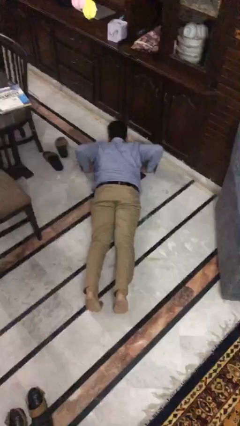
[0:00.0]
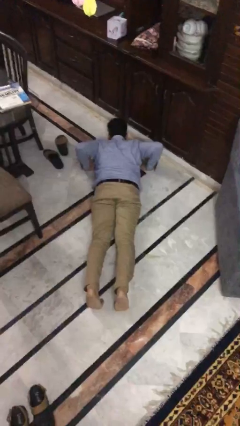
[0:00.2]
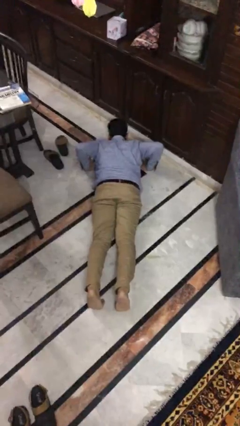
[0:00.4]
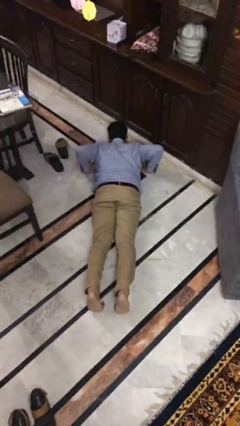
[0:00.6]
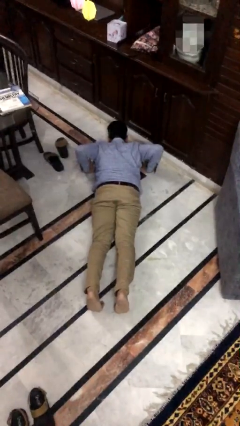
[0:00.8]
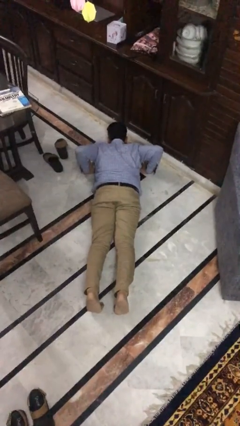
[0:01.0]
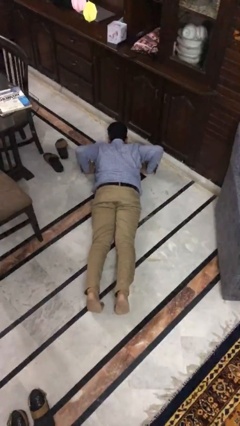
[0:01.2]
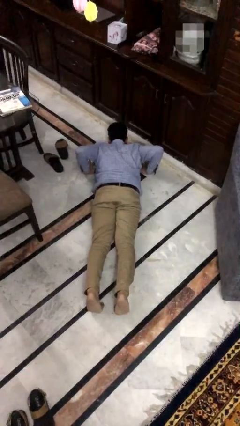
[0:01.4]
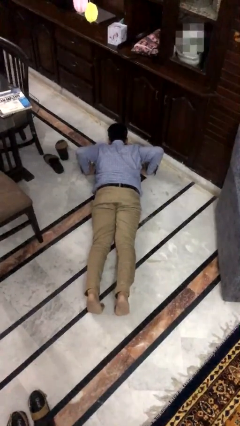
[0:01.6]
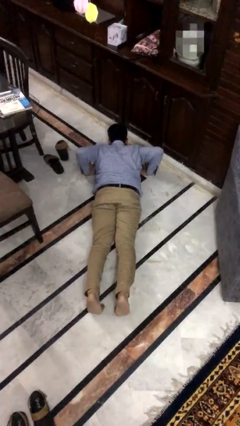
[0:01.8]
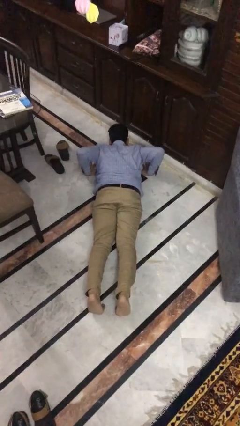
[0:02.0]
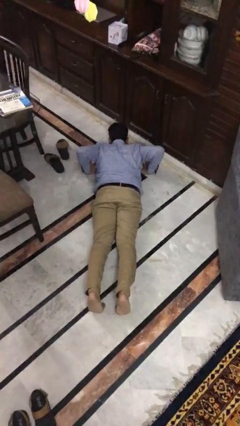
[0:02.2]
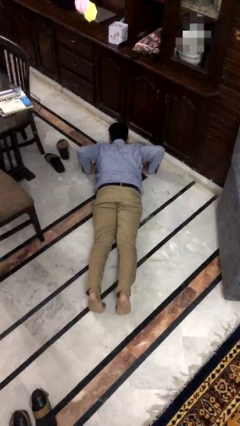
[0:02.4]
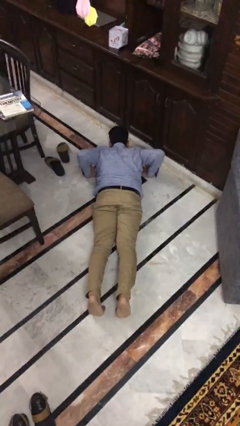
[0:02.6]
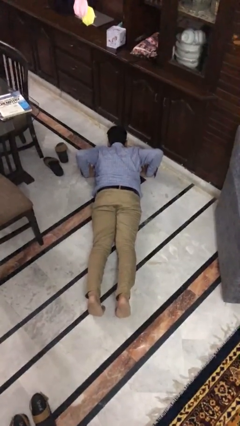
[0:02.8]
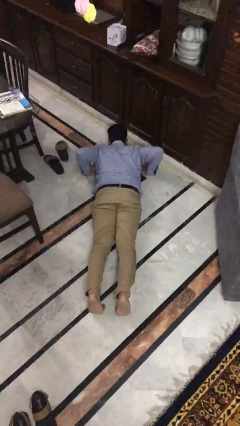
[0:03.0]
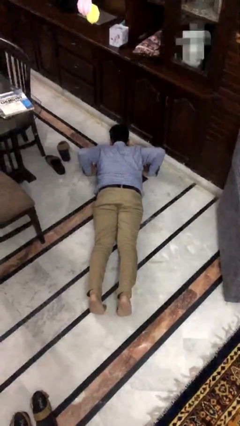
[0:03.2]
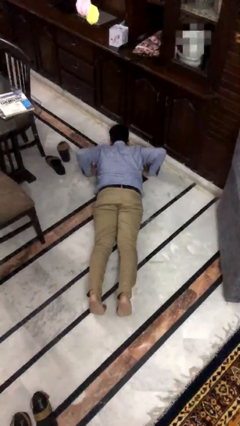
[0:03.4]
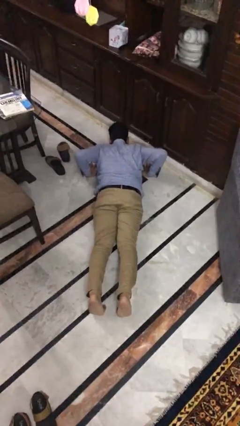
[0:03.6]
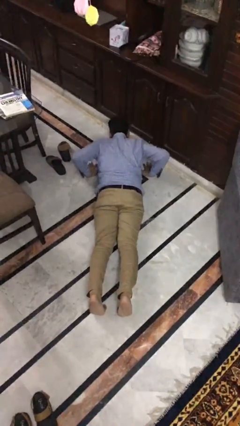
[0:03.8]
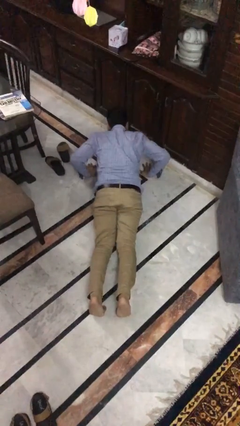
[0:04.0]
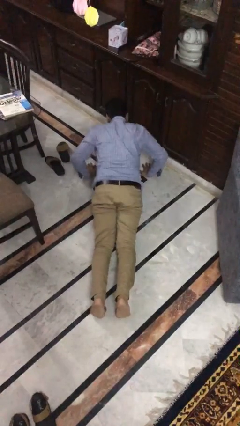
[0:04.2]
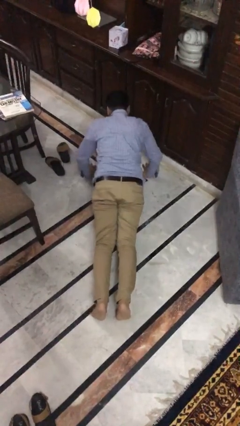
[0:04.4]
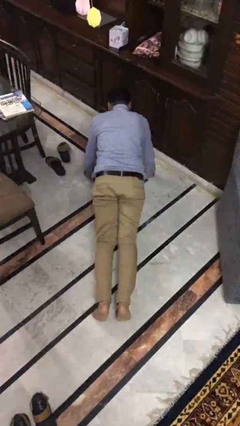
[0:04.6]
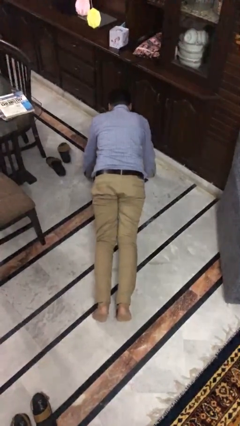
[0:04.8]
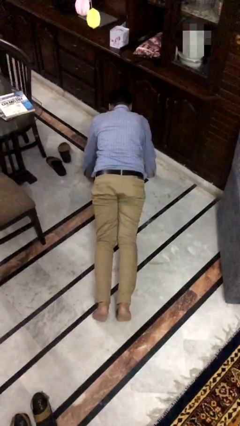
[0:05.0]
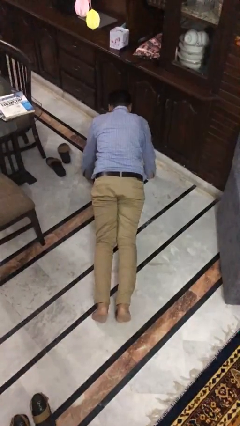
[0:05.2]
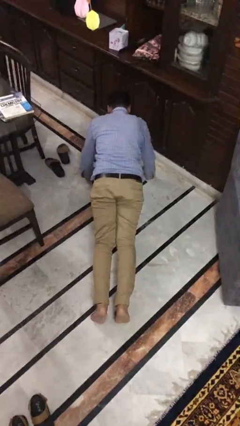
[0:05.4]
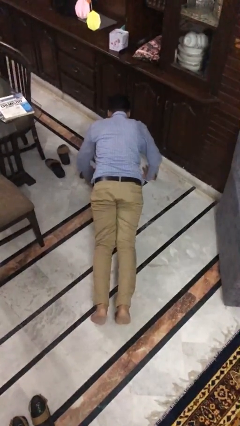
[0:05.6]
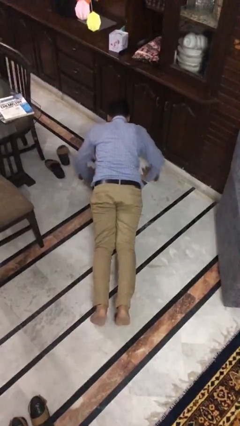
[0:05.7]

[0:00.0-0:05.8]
person exercises with pushup

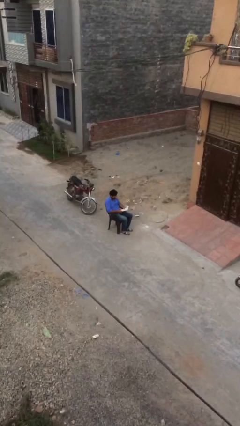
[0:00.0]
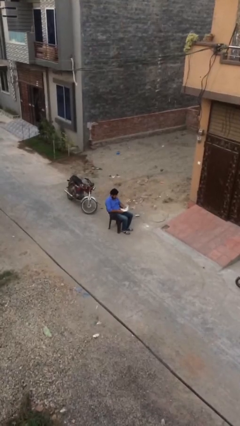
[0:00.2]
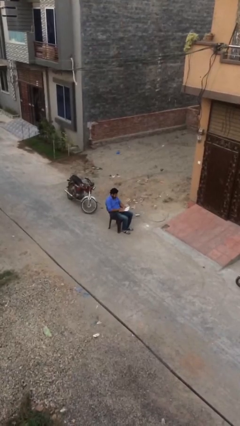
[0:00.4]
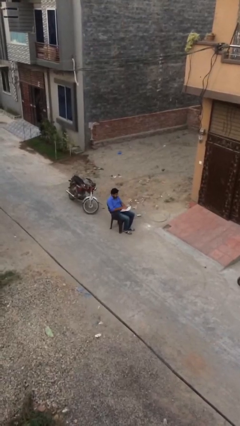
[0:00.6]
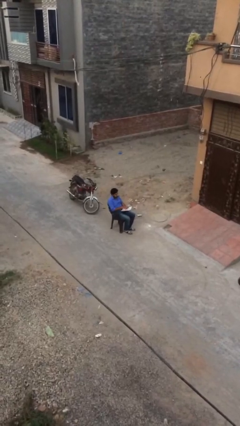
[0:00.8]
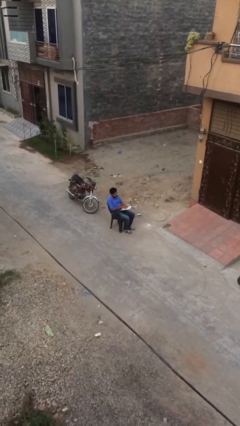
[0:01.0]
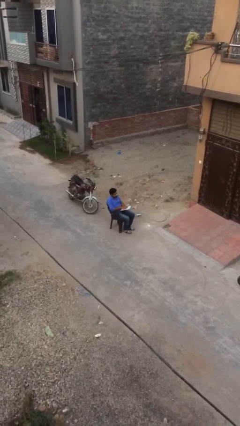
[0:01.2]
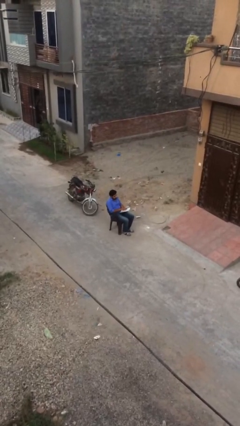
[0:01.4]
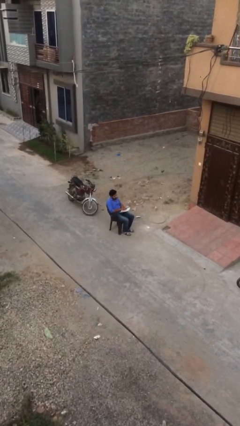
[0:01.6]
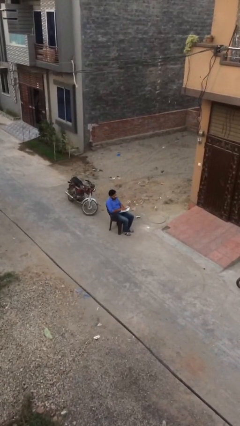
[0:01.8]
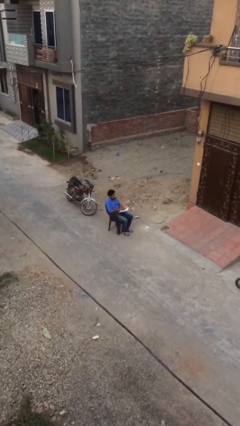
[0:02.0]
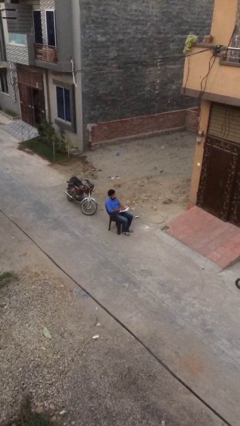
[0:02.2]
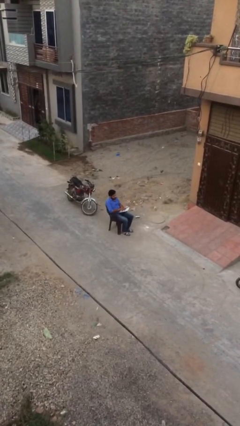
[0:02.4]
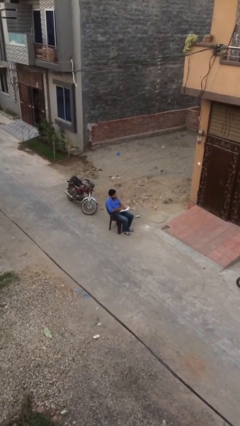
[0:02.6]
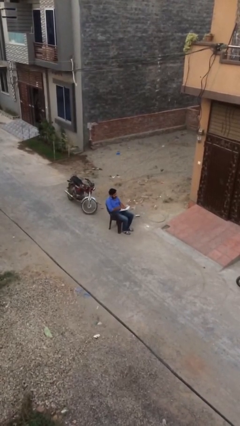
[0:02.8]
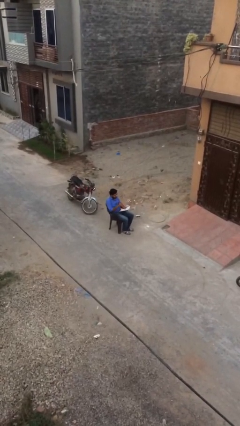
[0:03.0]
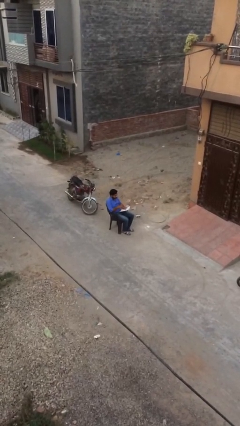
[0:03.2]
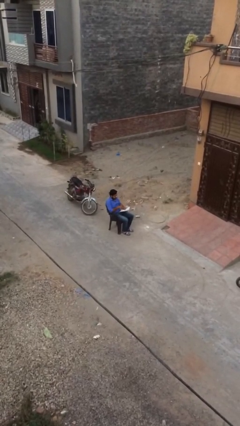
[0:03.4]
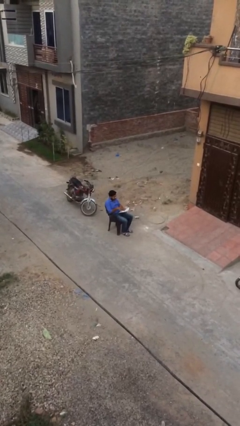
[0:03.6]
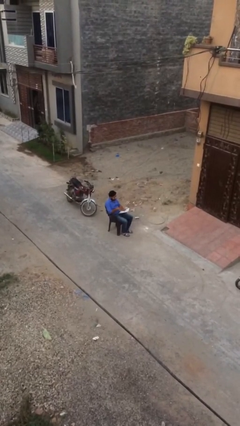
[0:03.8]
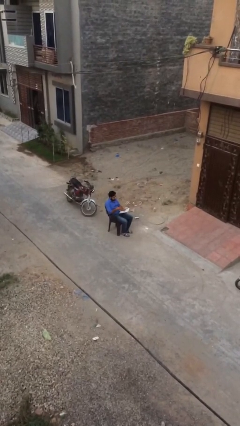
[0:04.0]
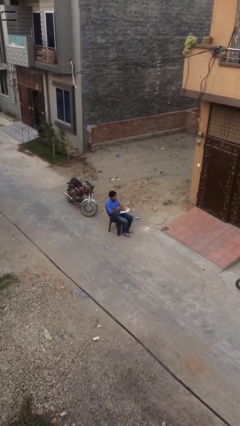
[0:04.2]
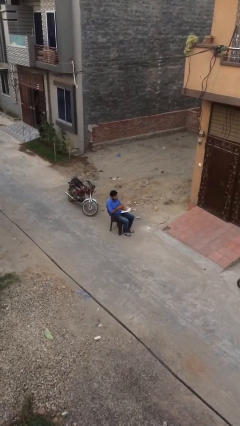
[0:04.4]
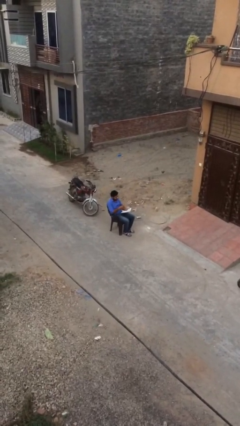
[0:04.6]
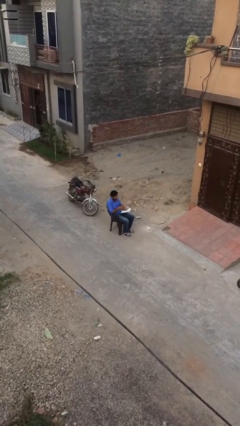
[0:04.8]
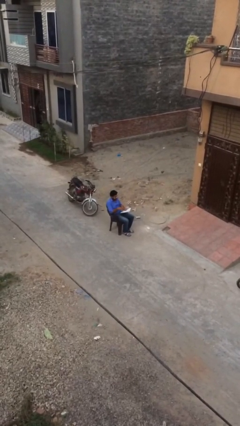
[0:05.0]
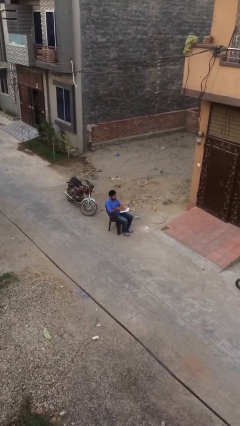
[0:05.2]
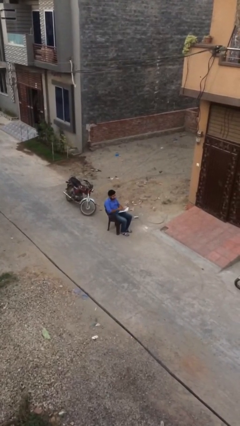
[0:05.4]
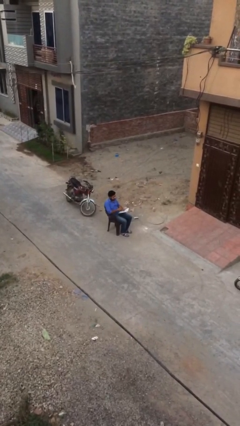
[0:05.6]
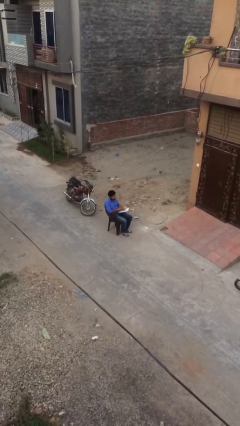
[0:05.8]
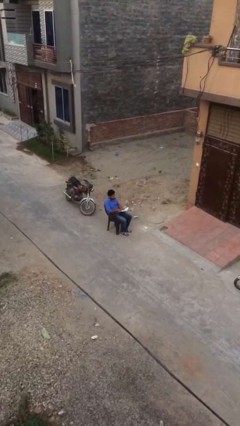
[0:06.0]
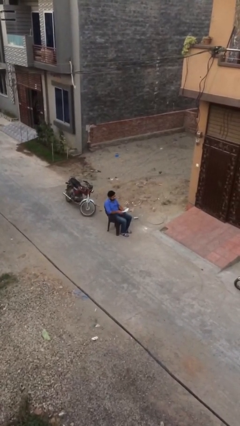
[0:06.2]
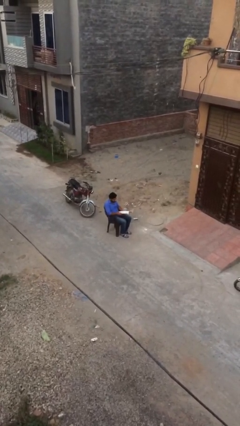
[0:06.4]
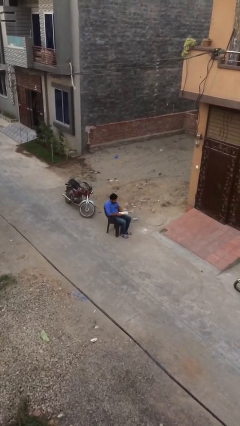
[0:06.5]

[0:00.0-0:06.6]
person reads document

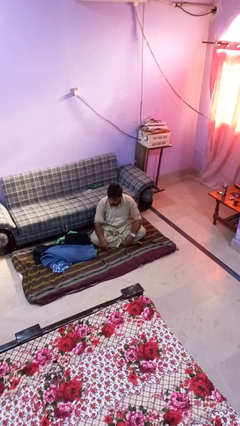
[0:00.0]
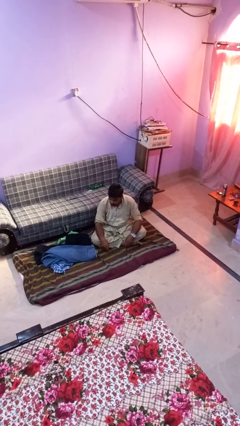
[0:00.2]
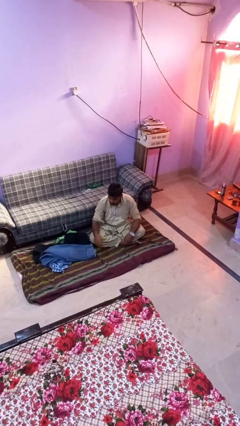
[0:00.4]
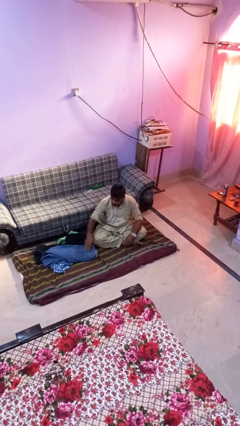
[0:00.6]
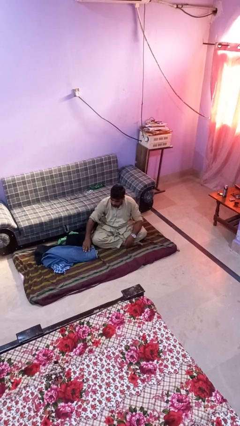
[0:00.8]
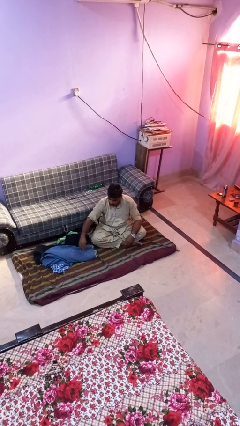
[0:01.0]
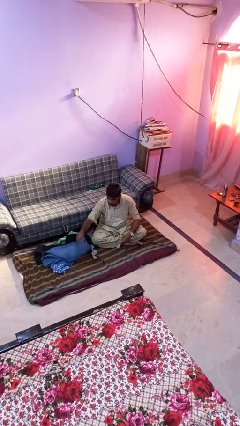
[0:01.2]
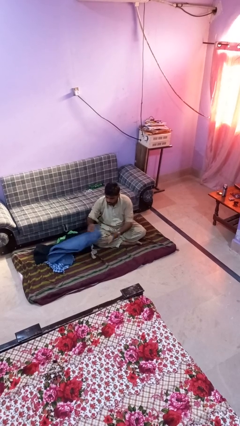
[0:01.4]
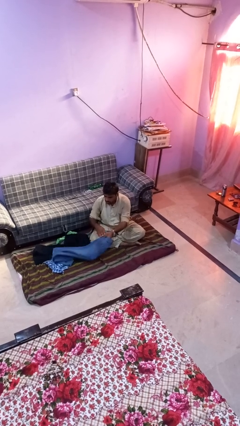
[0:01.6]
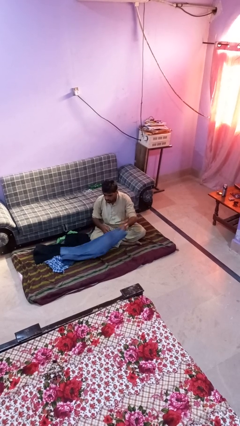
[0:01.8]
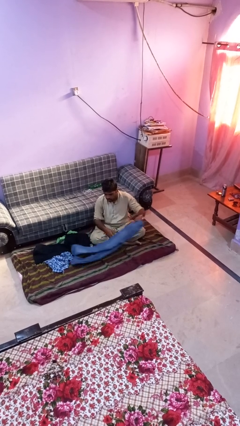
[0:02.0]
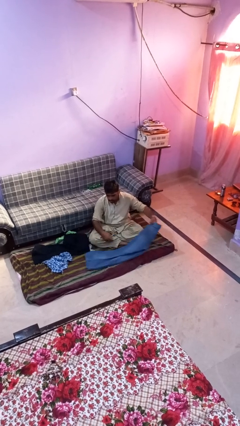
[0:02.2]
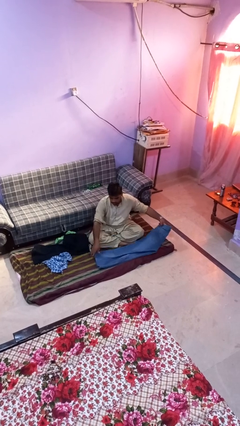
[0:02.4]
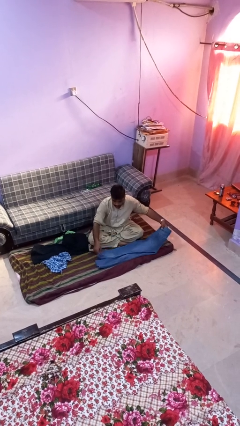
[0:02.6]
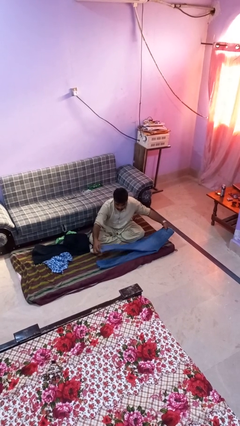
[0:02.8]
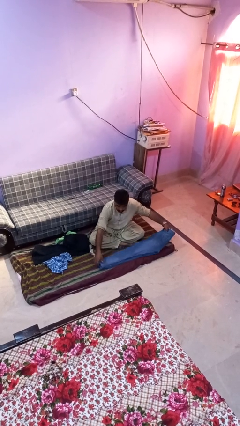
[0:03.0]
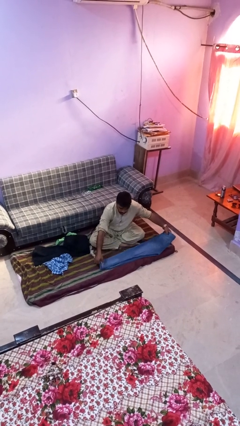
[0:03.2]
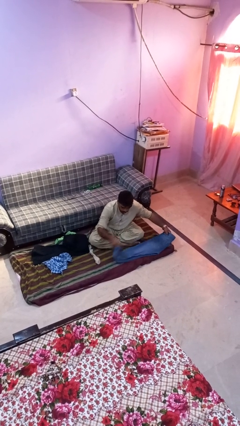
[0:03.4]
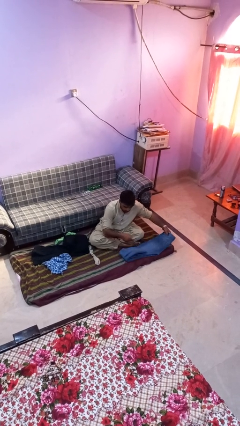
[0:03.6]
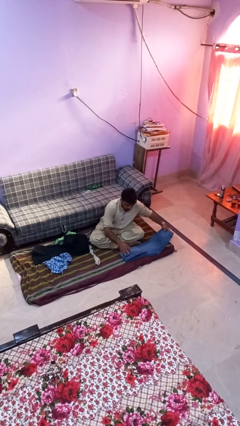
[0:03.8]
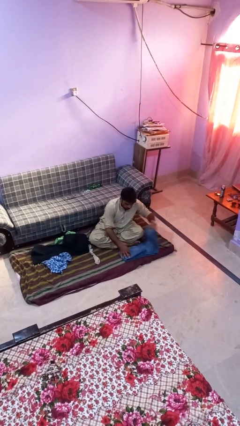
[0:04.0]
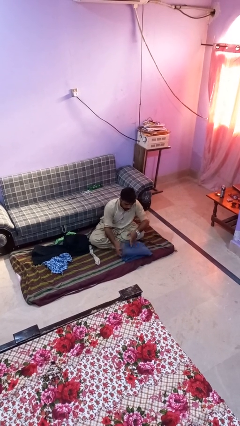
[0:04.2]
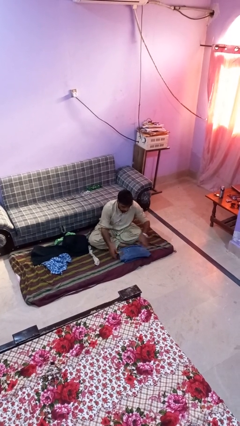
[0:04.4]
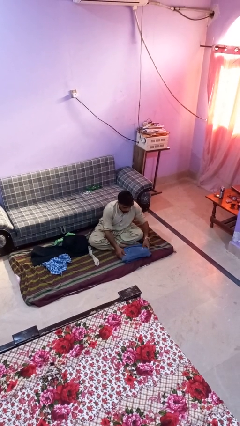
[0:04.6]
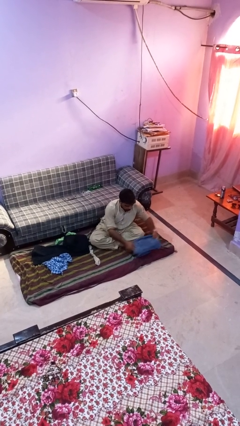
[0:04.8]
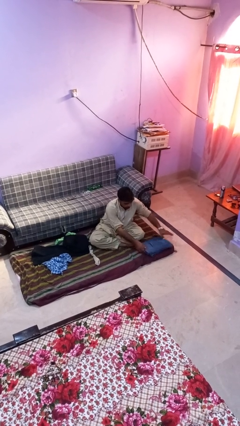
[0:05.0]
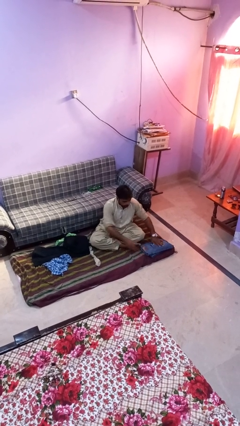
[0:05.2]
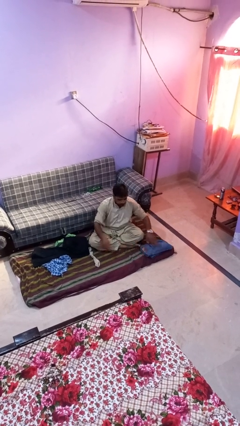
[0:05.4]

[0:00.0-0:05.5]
person folds pants

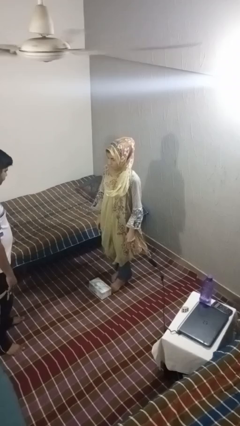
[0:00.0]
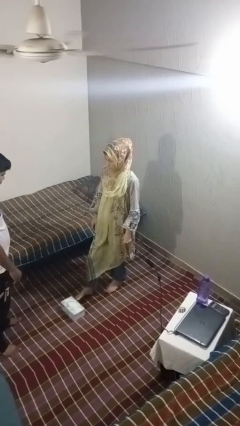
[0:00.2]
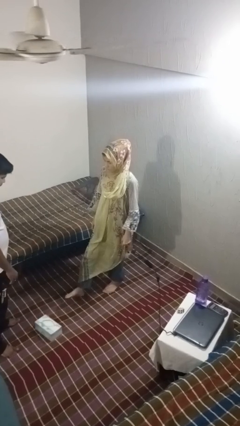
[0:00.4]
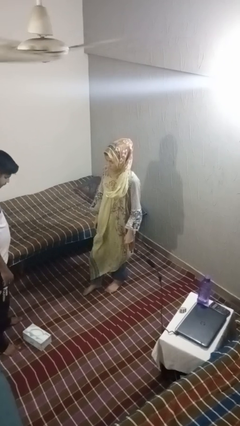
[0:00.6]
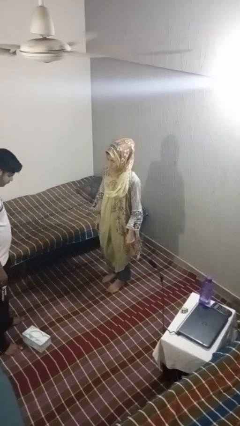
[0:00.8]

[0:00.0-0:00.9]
person kicks object to person
